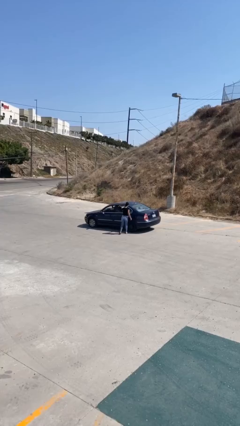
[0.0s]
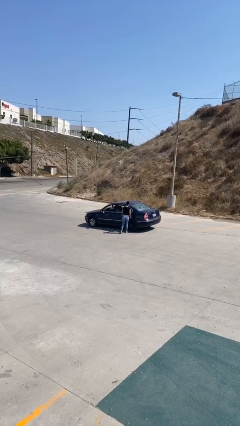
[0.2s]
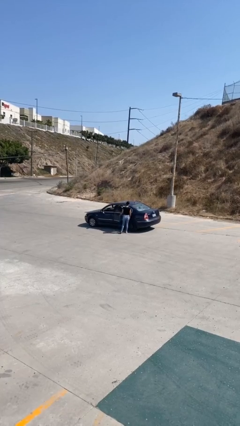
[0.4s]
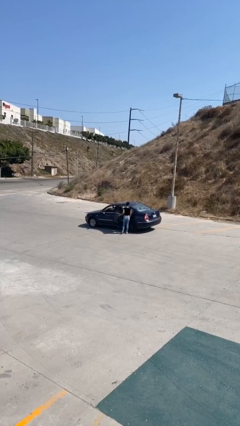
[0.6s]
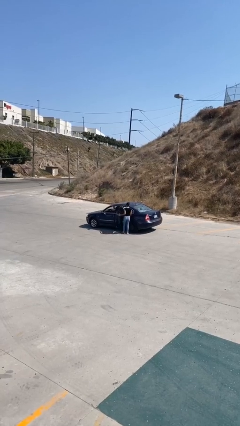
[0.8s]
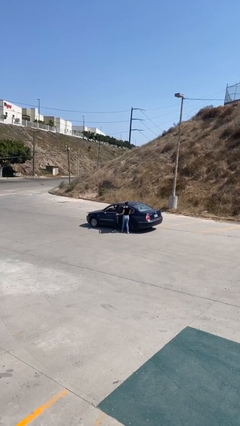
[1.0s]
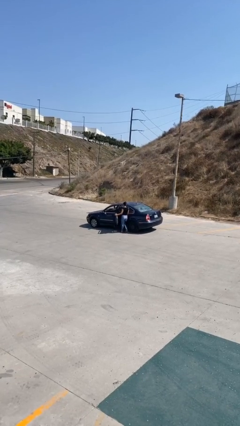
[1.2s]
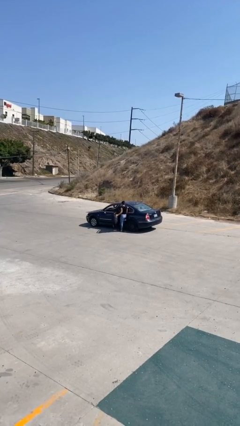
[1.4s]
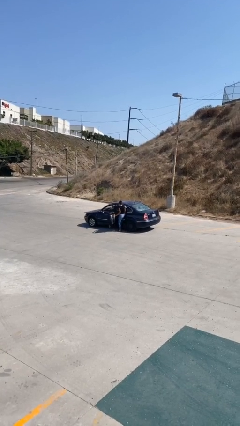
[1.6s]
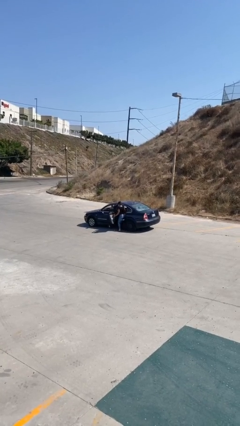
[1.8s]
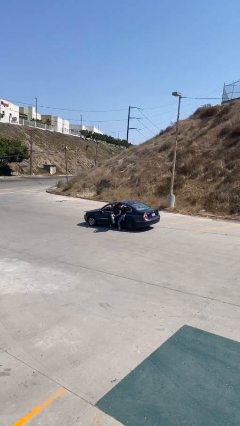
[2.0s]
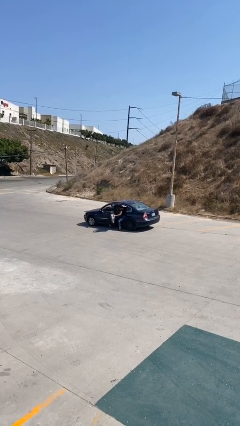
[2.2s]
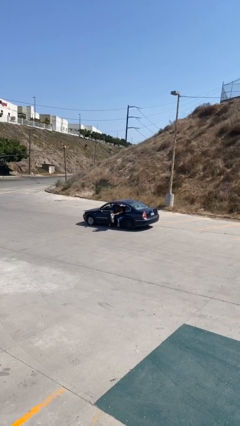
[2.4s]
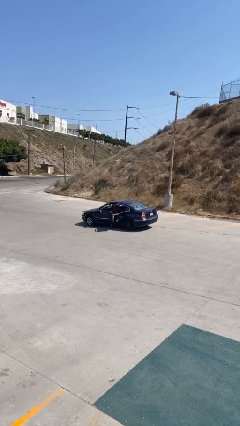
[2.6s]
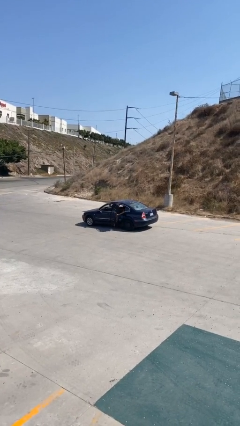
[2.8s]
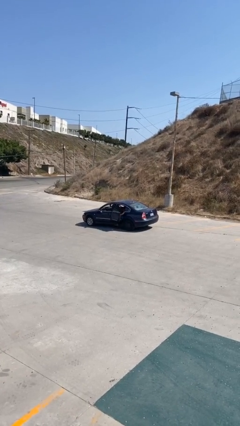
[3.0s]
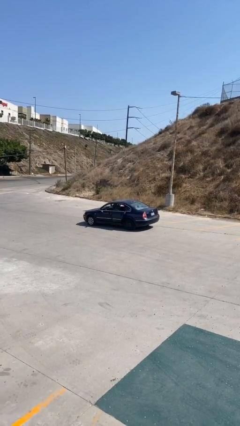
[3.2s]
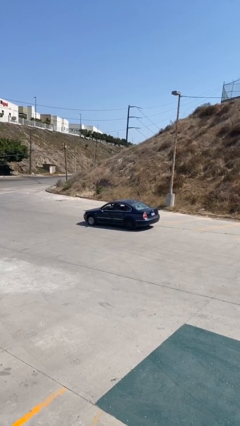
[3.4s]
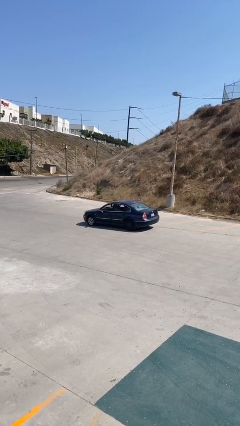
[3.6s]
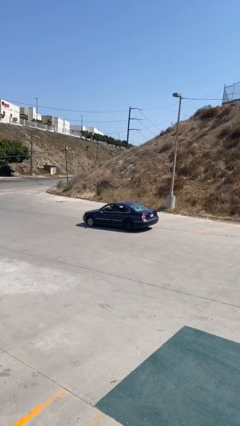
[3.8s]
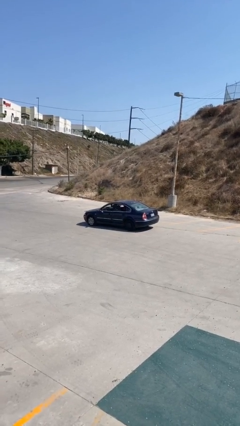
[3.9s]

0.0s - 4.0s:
car picks up person

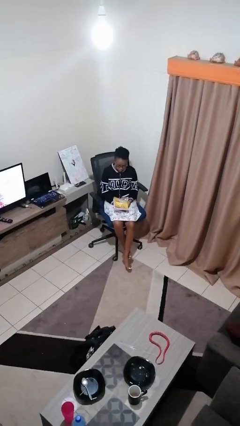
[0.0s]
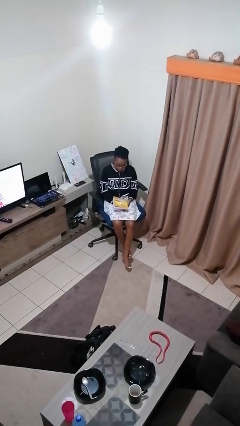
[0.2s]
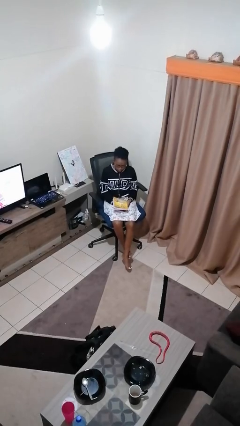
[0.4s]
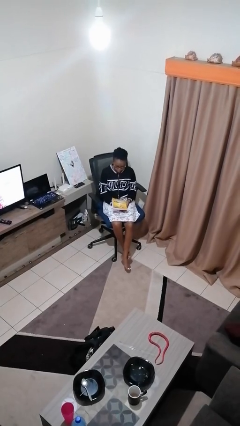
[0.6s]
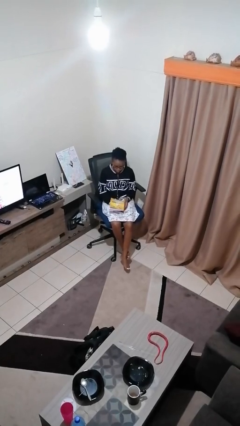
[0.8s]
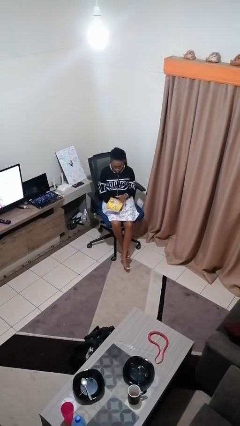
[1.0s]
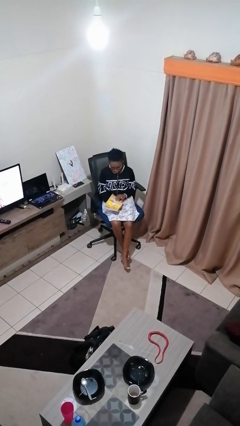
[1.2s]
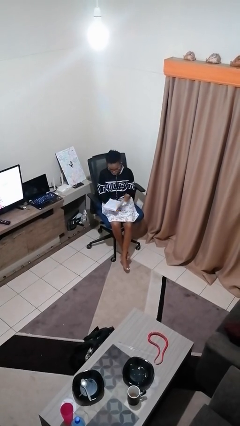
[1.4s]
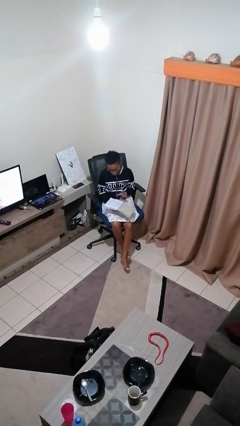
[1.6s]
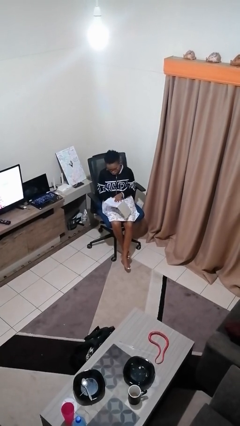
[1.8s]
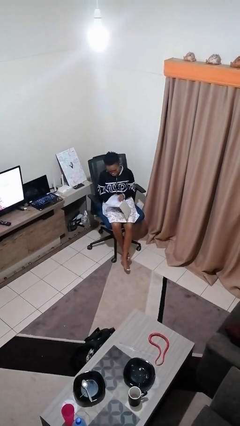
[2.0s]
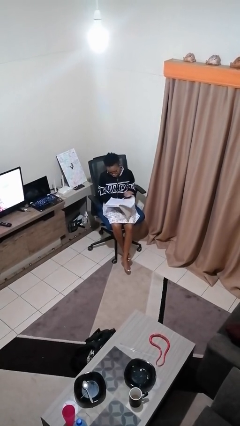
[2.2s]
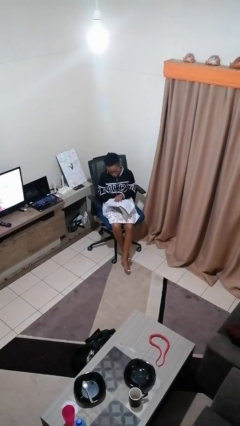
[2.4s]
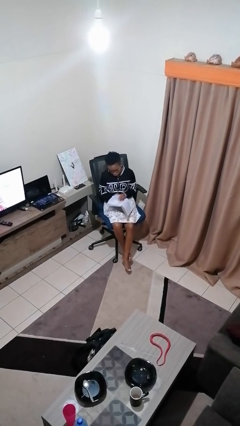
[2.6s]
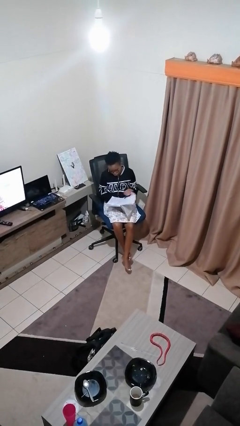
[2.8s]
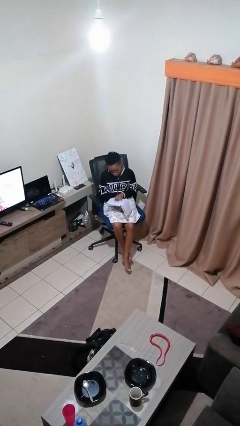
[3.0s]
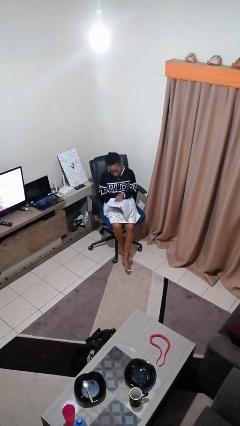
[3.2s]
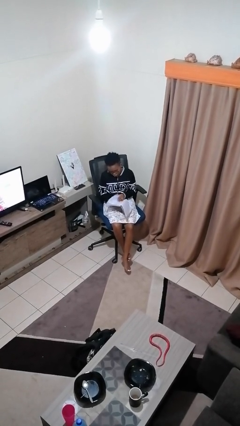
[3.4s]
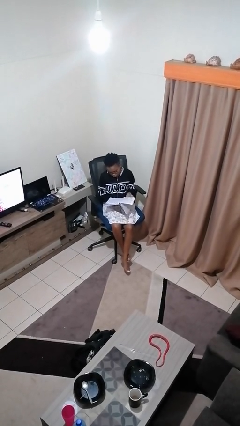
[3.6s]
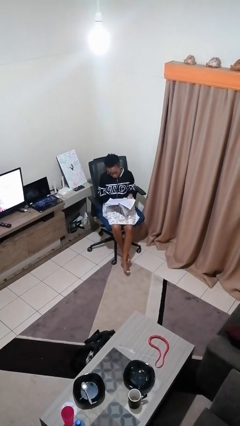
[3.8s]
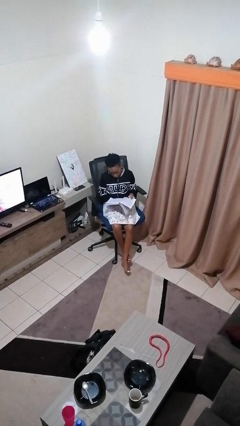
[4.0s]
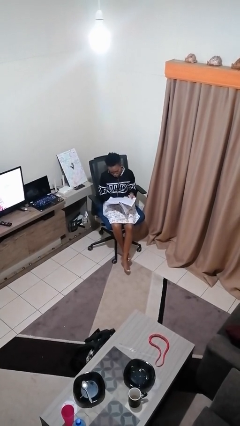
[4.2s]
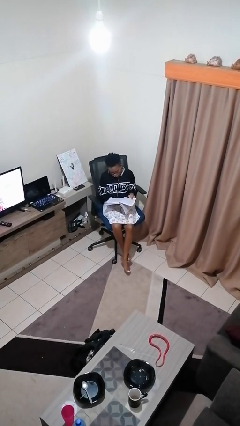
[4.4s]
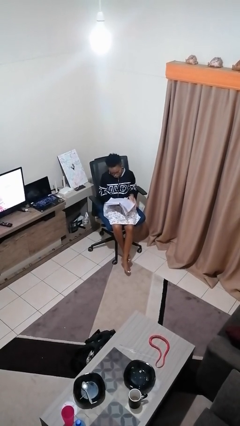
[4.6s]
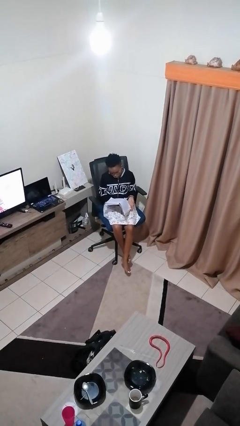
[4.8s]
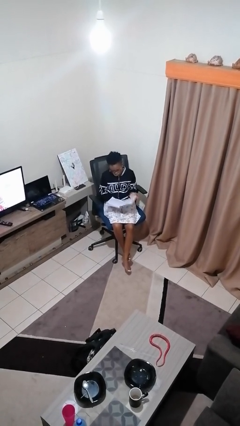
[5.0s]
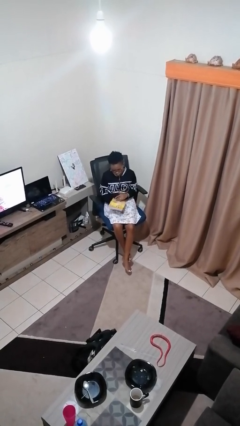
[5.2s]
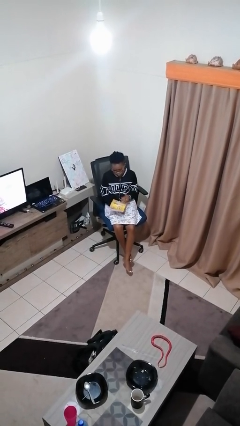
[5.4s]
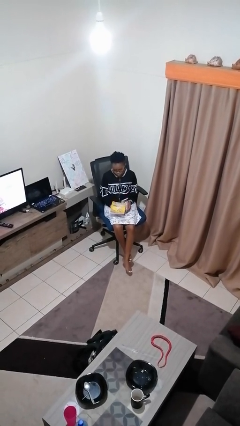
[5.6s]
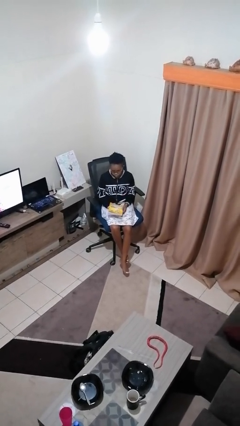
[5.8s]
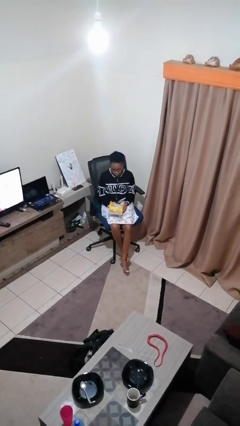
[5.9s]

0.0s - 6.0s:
person reads book

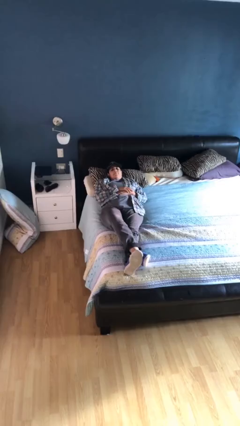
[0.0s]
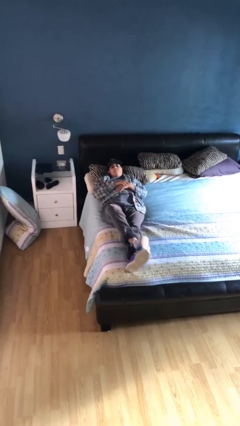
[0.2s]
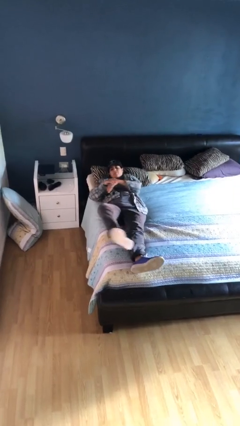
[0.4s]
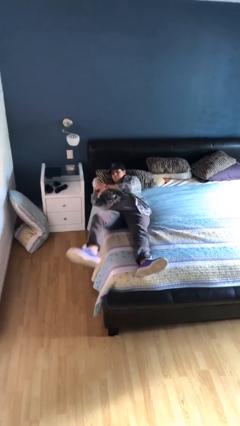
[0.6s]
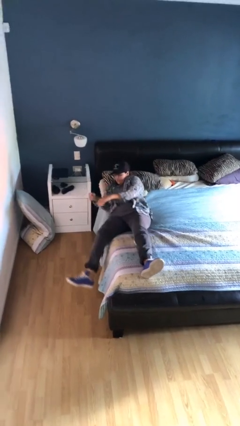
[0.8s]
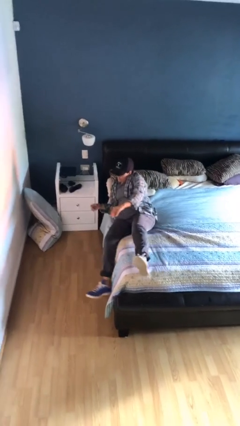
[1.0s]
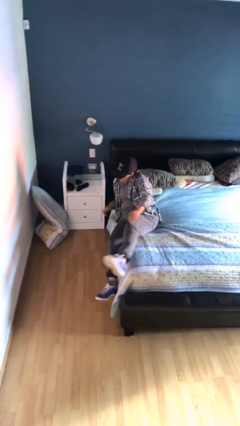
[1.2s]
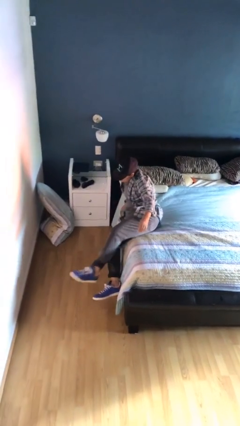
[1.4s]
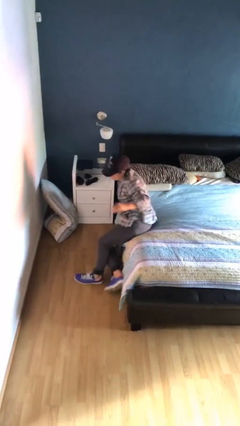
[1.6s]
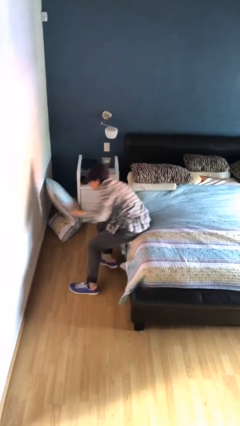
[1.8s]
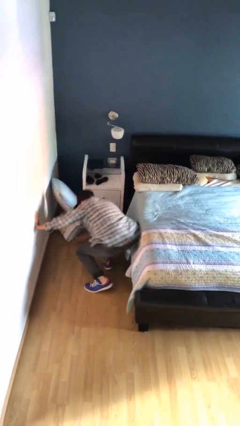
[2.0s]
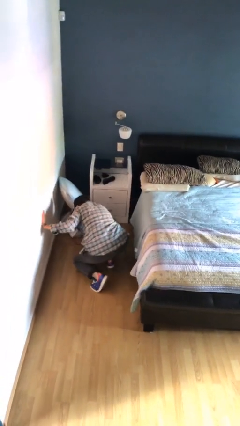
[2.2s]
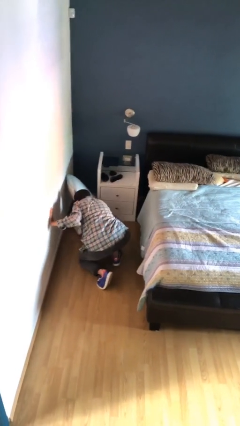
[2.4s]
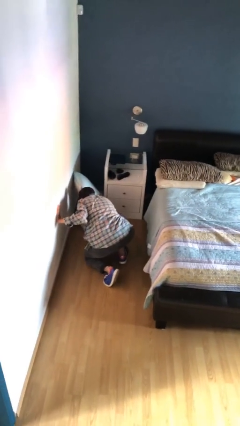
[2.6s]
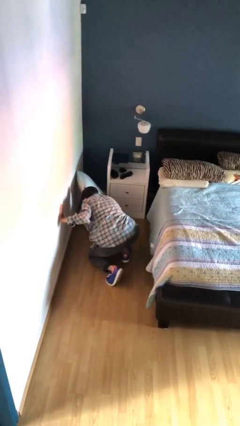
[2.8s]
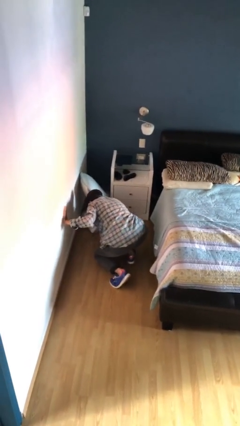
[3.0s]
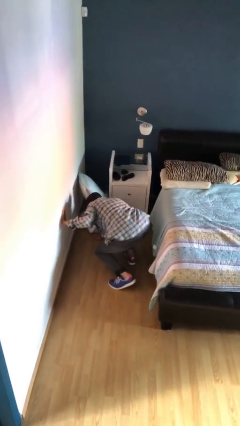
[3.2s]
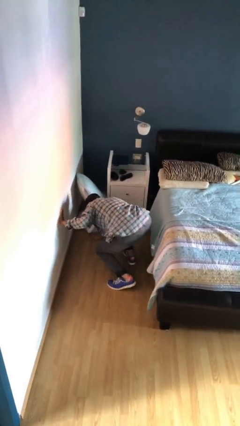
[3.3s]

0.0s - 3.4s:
person falls from bed

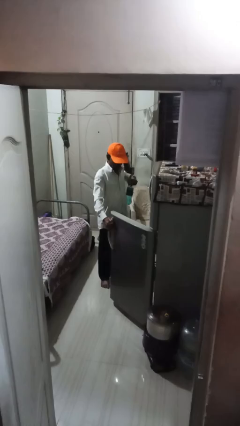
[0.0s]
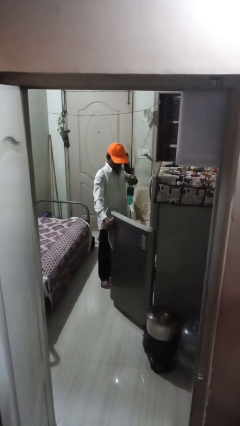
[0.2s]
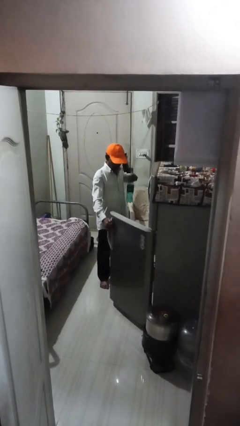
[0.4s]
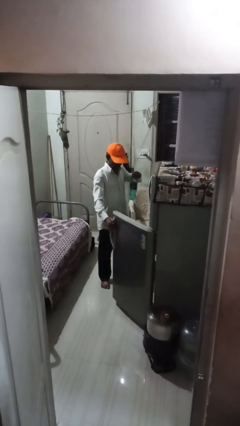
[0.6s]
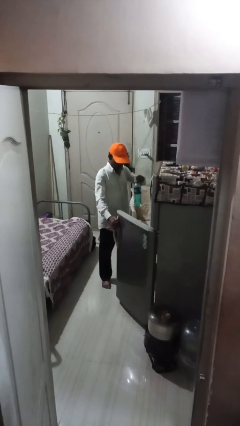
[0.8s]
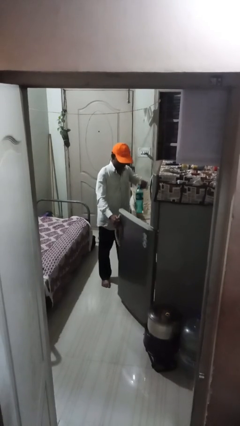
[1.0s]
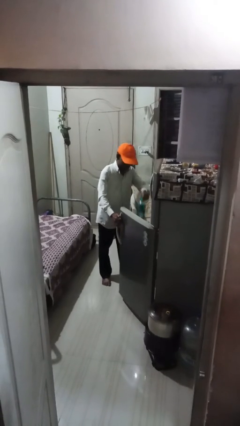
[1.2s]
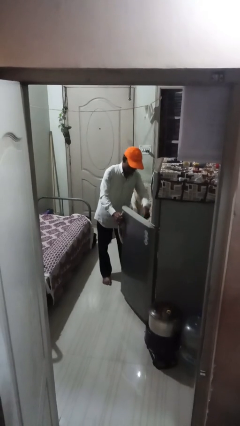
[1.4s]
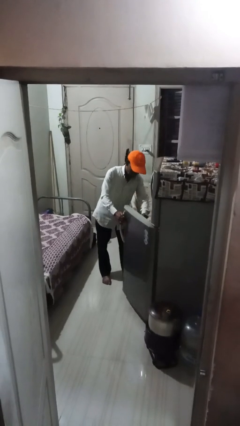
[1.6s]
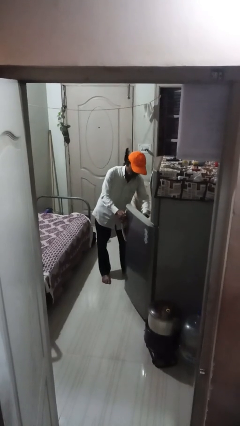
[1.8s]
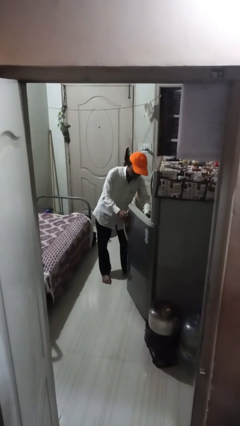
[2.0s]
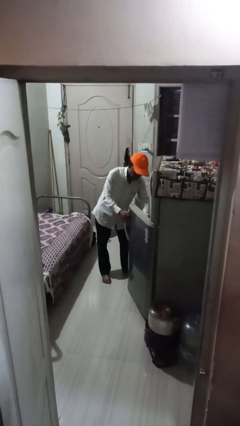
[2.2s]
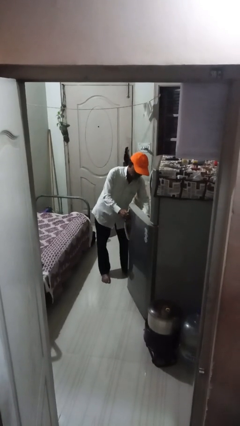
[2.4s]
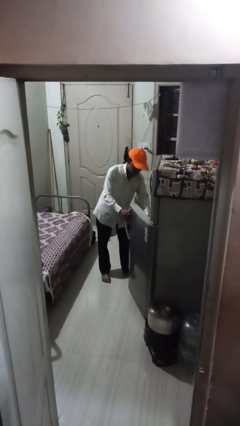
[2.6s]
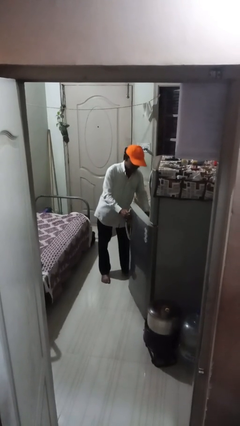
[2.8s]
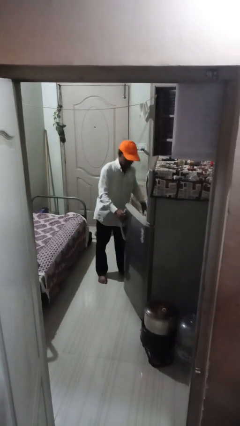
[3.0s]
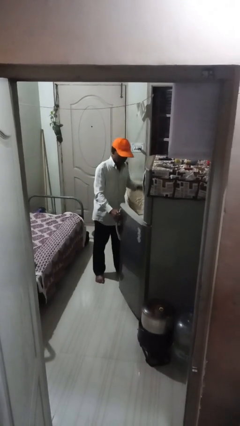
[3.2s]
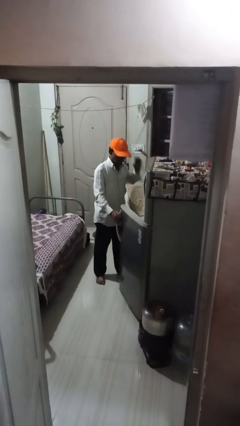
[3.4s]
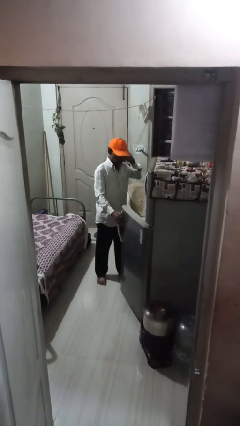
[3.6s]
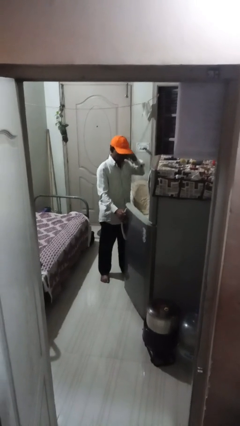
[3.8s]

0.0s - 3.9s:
person puts object into refrigerator

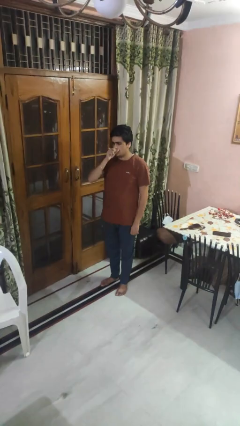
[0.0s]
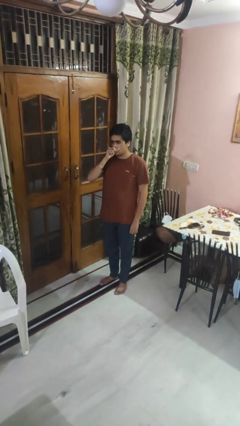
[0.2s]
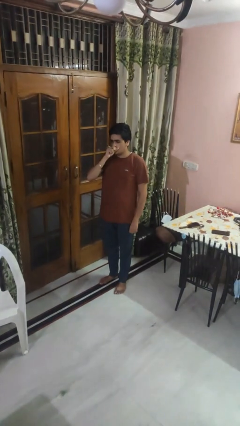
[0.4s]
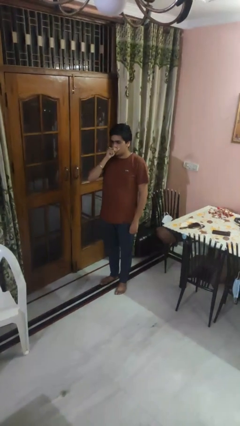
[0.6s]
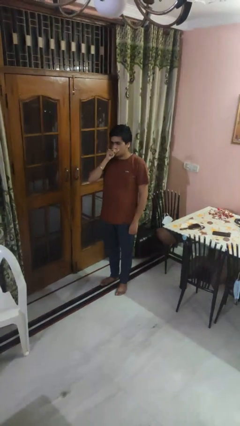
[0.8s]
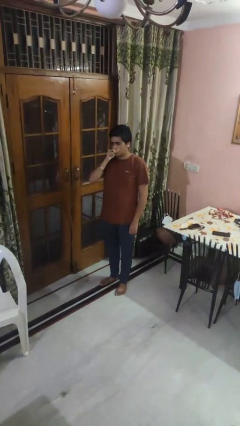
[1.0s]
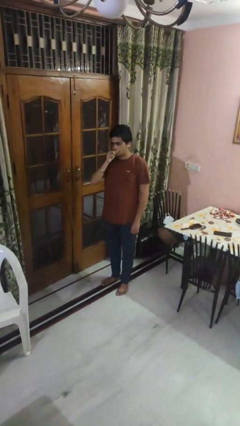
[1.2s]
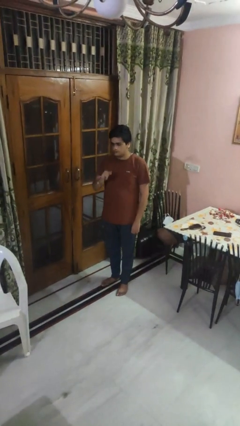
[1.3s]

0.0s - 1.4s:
person vapes
